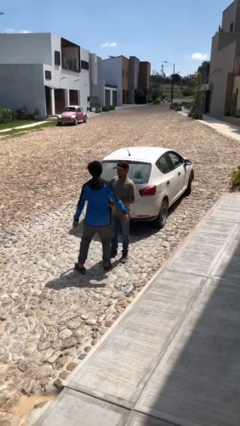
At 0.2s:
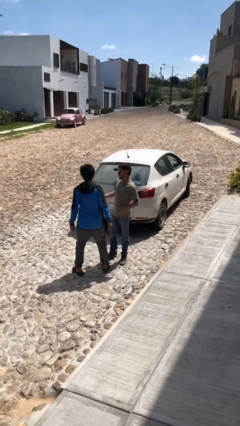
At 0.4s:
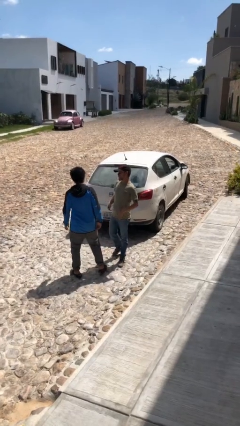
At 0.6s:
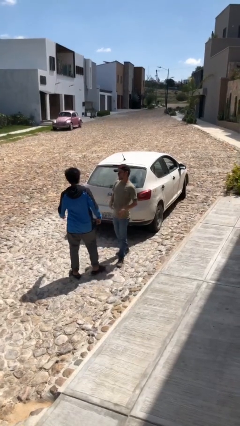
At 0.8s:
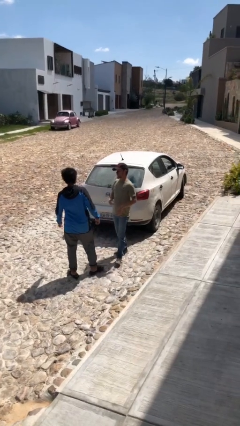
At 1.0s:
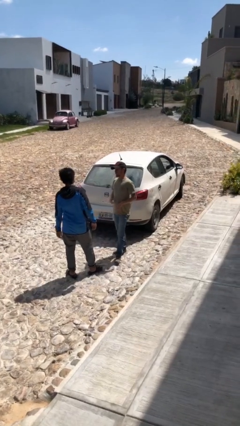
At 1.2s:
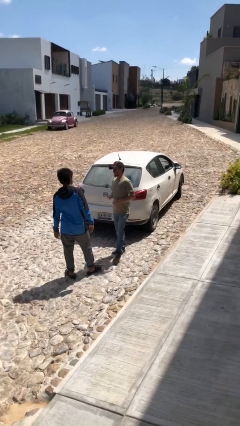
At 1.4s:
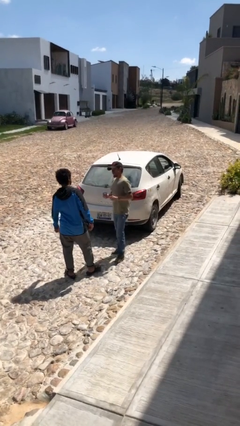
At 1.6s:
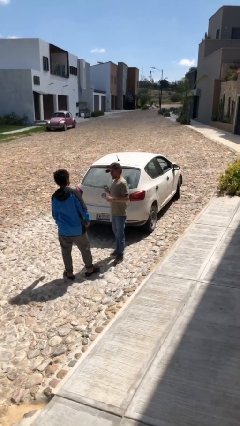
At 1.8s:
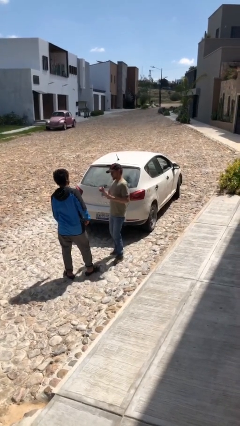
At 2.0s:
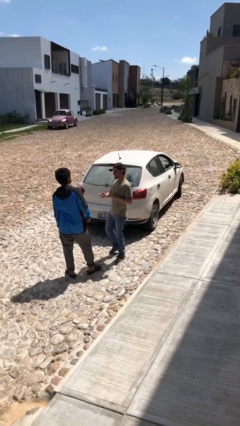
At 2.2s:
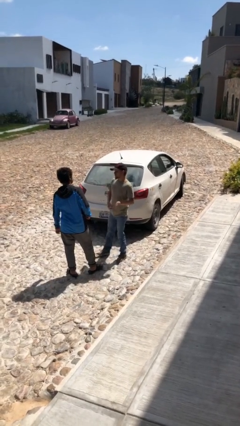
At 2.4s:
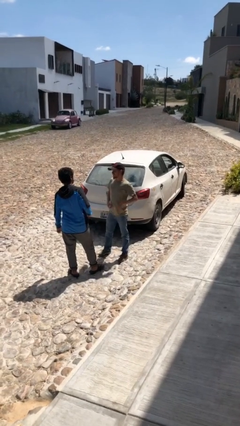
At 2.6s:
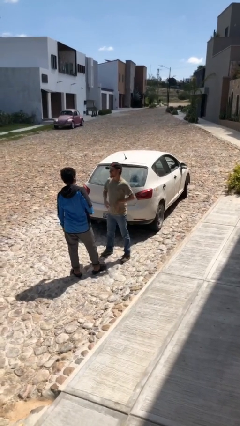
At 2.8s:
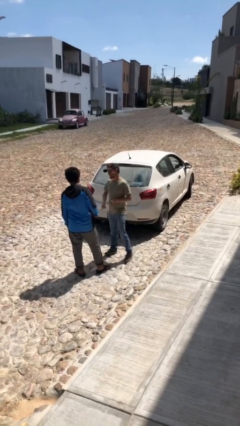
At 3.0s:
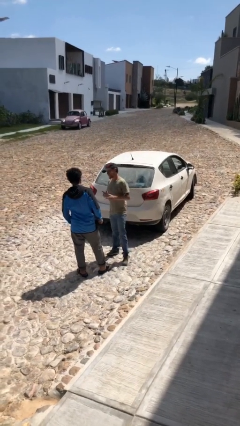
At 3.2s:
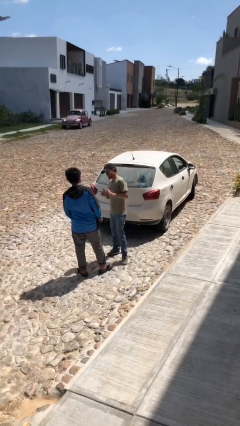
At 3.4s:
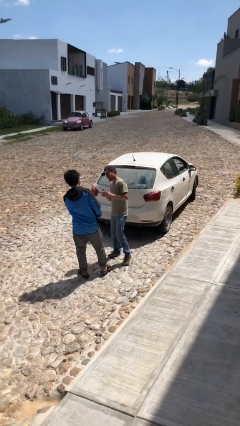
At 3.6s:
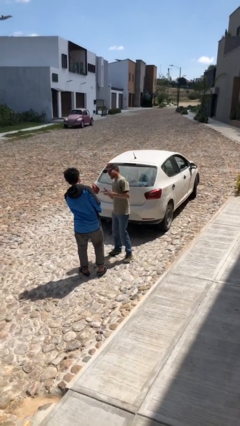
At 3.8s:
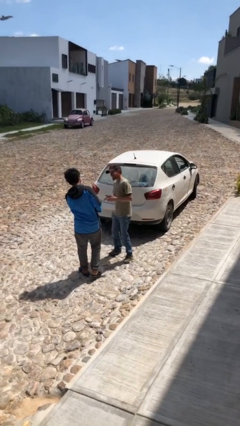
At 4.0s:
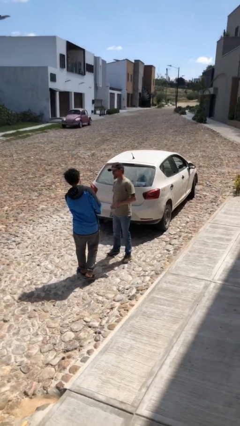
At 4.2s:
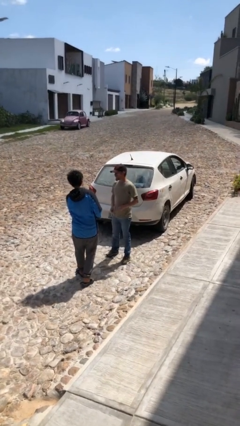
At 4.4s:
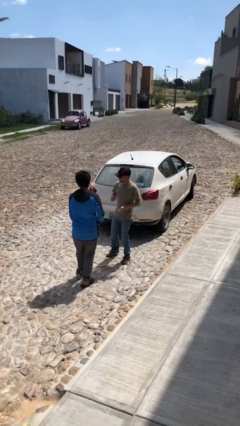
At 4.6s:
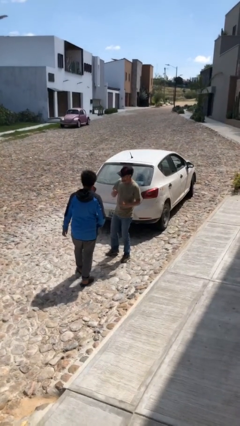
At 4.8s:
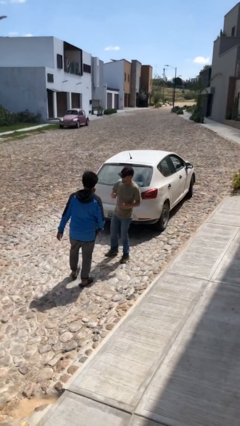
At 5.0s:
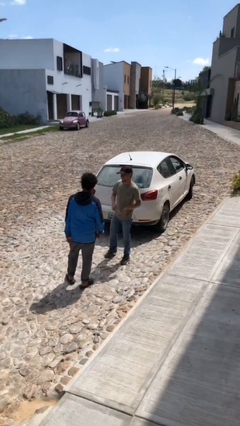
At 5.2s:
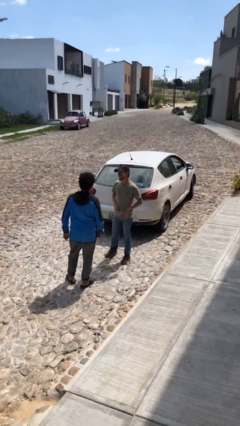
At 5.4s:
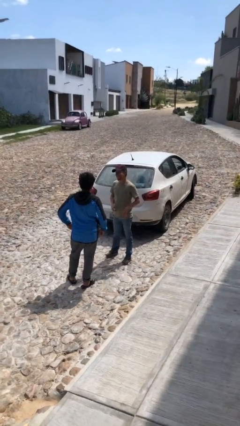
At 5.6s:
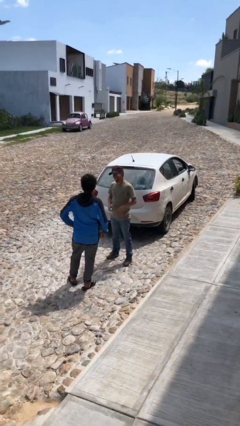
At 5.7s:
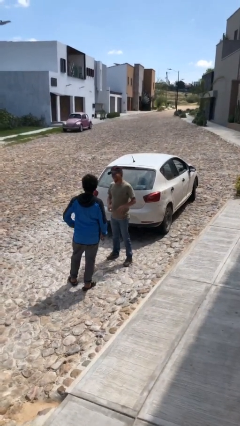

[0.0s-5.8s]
person talks to person

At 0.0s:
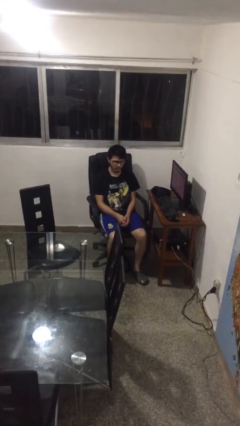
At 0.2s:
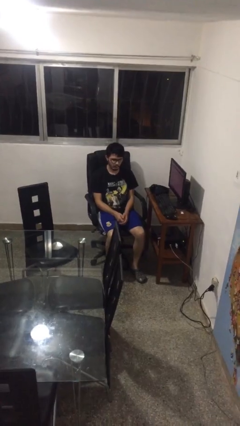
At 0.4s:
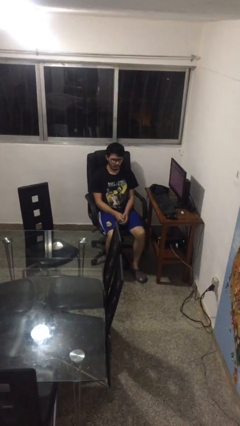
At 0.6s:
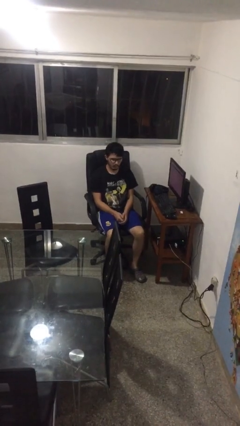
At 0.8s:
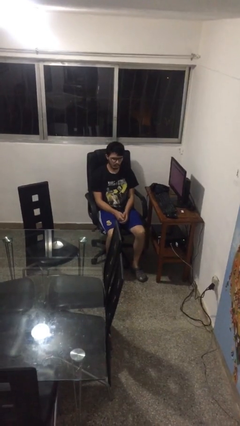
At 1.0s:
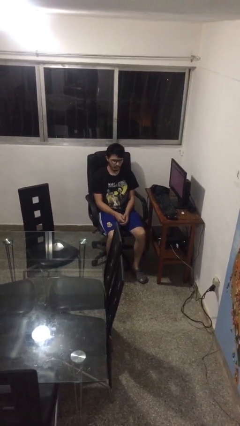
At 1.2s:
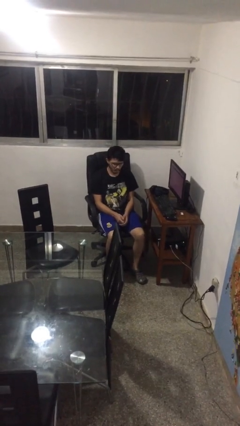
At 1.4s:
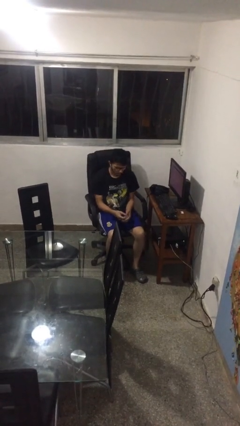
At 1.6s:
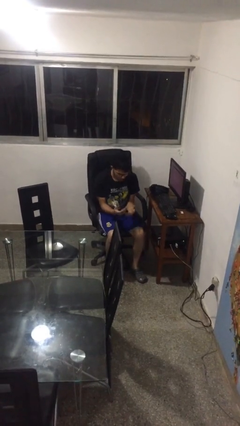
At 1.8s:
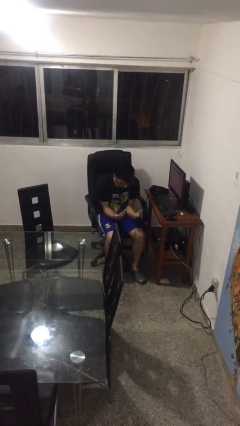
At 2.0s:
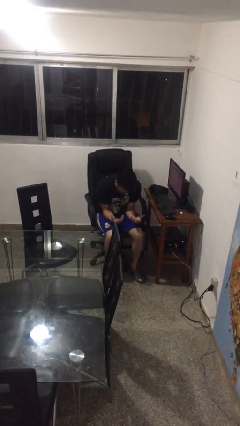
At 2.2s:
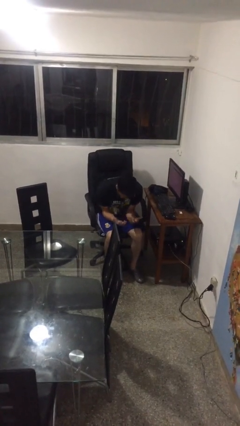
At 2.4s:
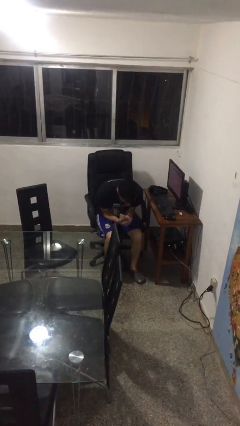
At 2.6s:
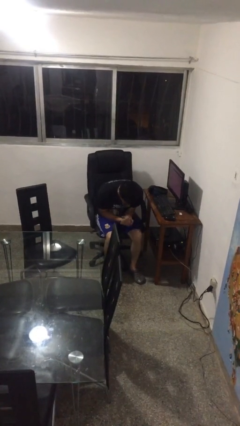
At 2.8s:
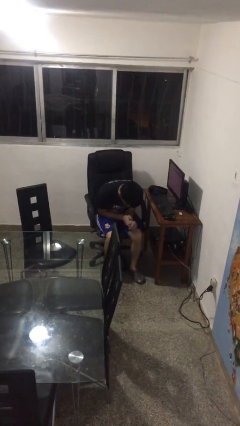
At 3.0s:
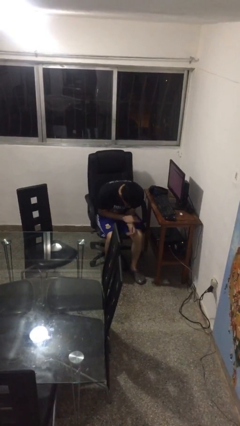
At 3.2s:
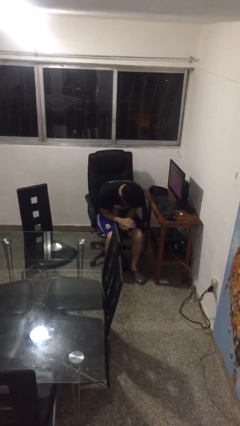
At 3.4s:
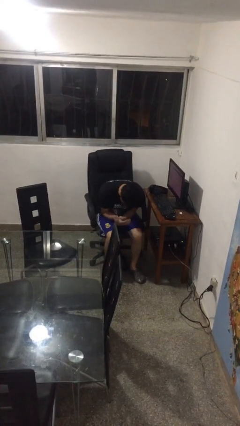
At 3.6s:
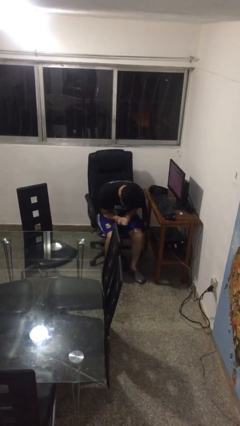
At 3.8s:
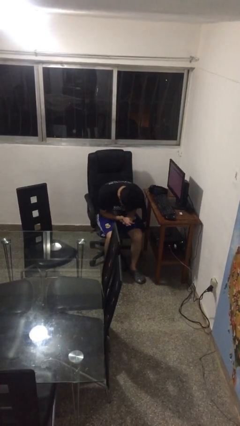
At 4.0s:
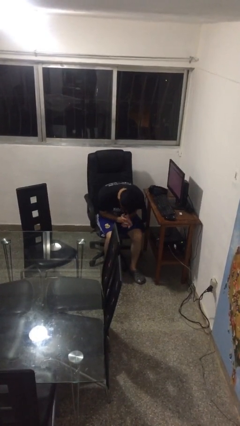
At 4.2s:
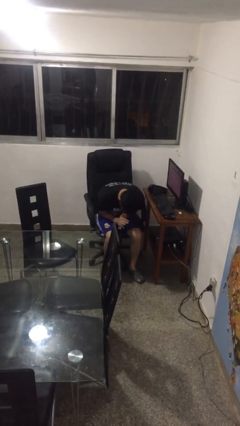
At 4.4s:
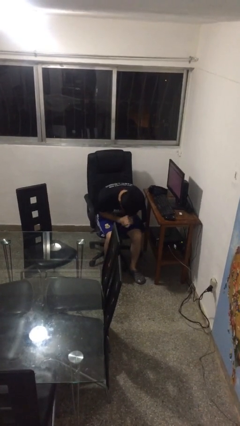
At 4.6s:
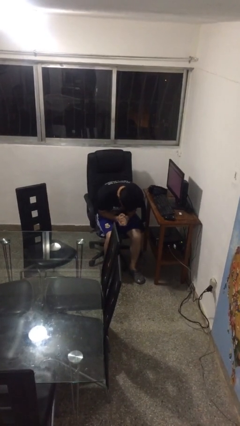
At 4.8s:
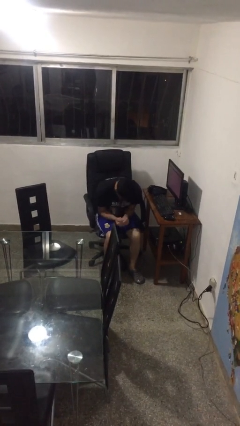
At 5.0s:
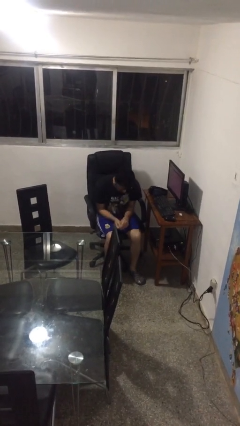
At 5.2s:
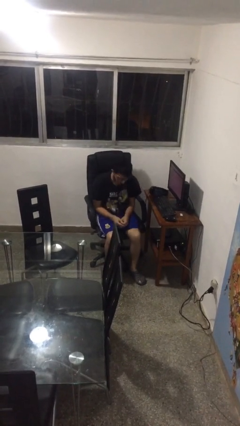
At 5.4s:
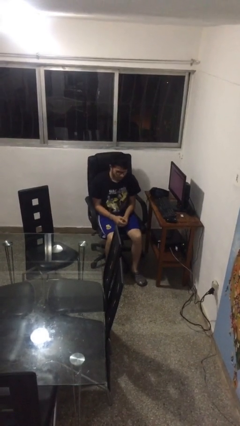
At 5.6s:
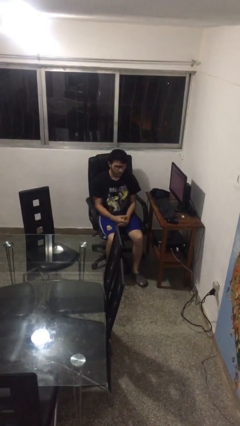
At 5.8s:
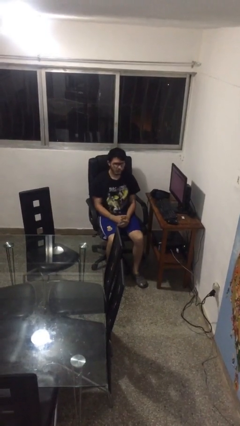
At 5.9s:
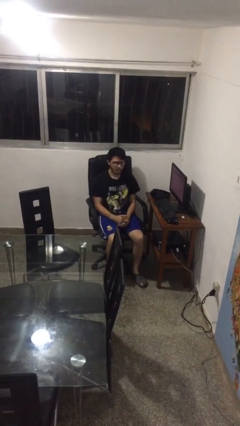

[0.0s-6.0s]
person looks at hands in lap

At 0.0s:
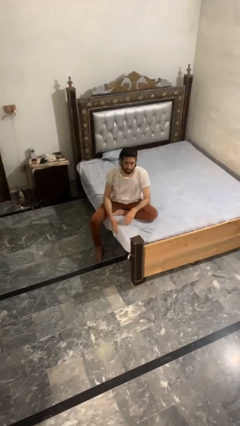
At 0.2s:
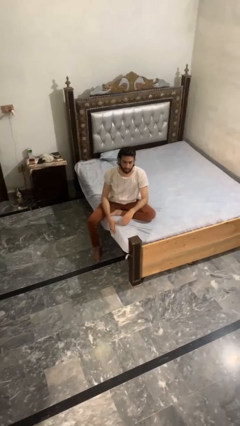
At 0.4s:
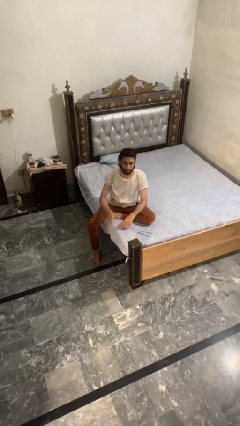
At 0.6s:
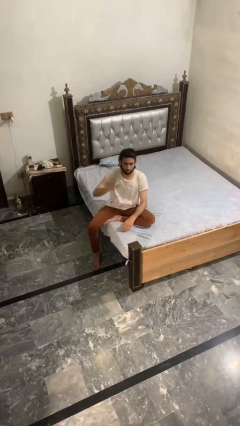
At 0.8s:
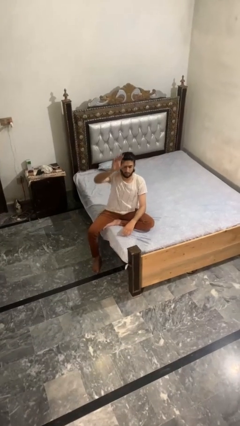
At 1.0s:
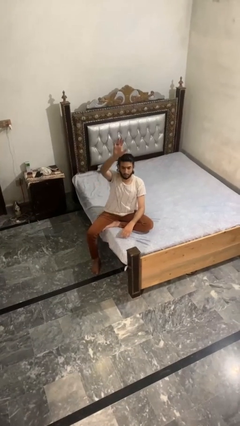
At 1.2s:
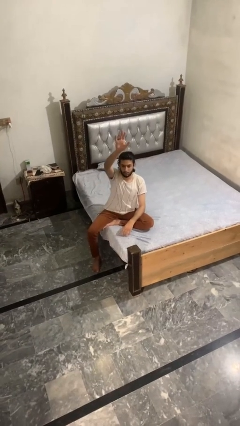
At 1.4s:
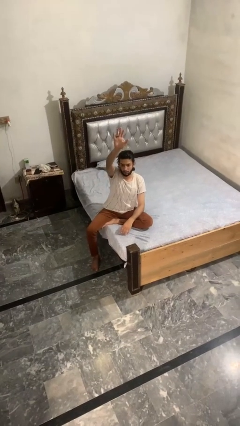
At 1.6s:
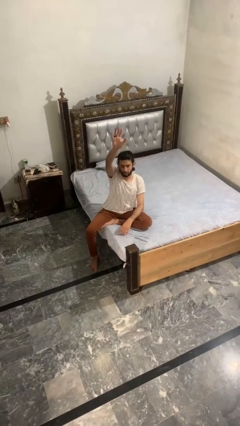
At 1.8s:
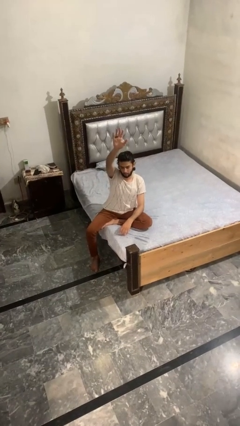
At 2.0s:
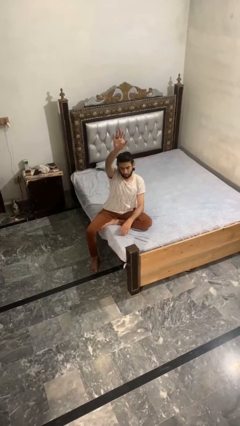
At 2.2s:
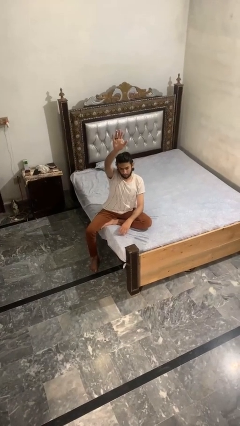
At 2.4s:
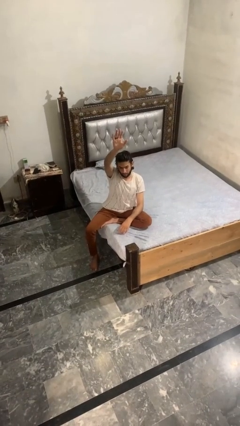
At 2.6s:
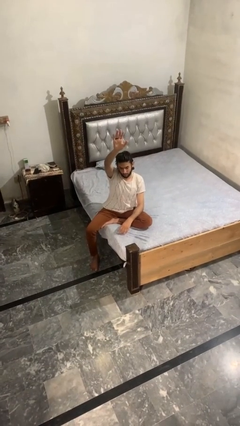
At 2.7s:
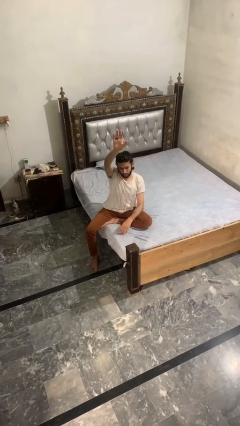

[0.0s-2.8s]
person gestures raise hand

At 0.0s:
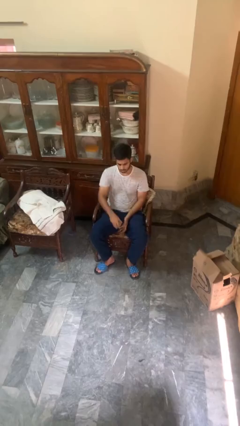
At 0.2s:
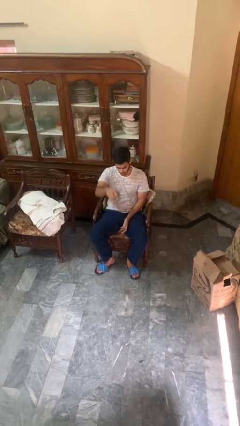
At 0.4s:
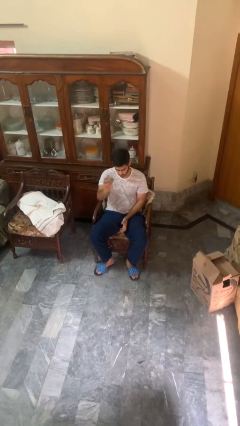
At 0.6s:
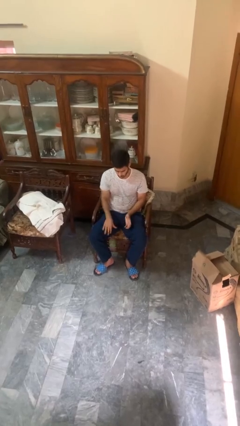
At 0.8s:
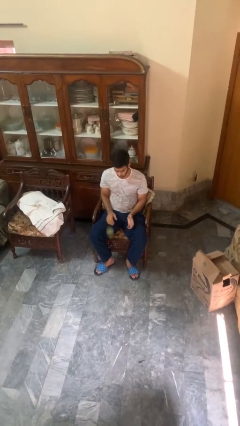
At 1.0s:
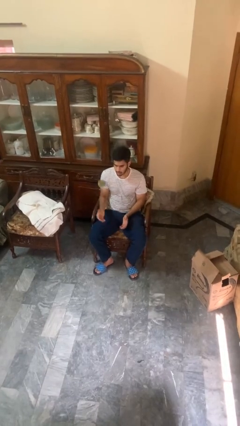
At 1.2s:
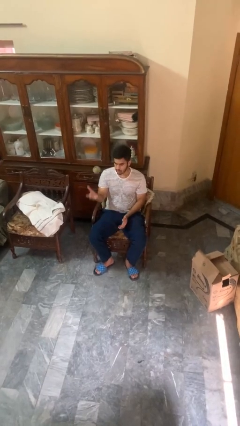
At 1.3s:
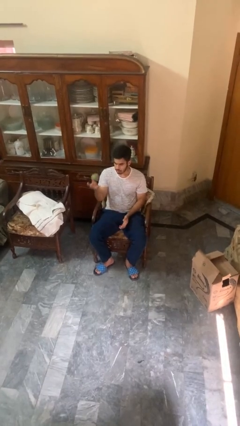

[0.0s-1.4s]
person bounces ball on floor

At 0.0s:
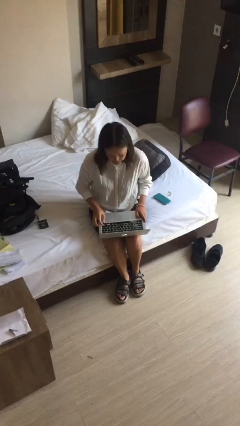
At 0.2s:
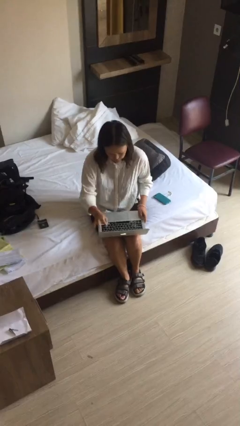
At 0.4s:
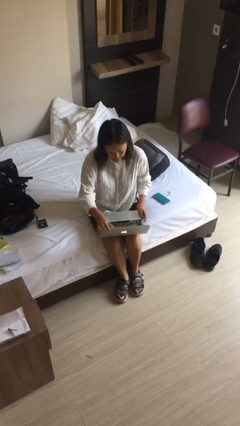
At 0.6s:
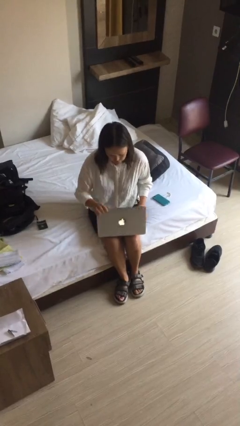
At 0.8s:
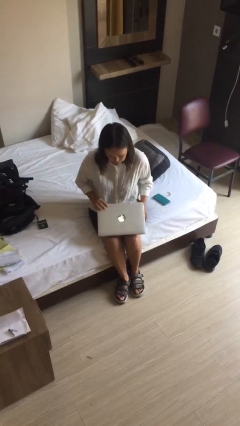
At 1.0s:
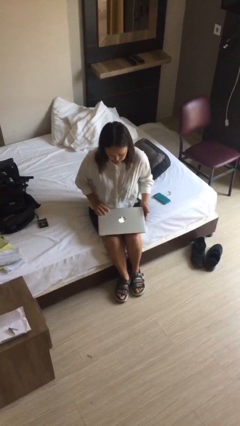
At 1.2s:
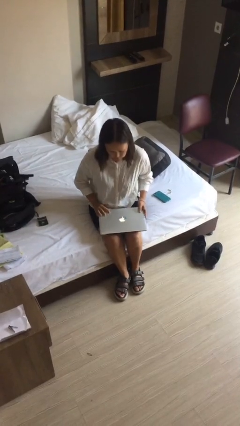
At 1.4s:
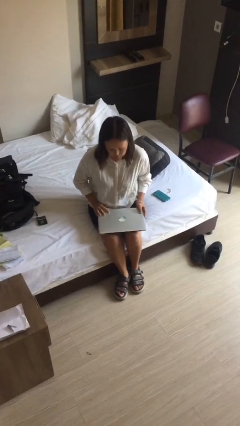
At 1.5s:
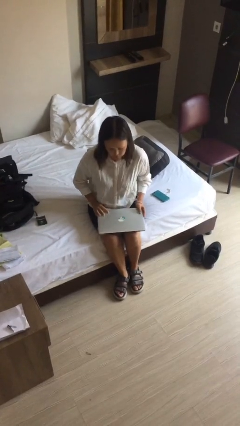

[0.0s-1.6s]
person closes laptop

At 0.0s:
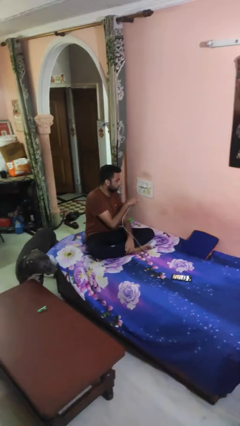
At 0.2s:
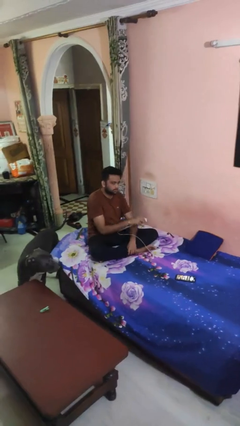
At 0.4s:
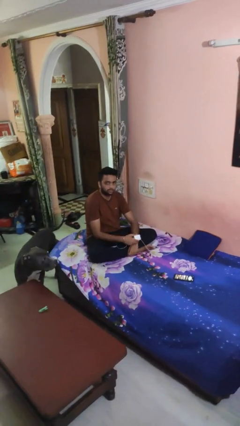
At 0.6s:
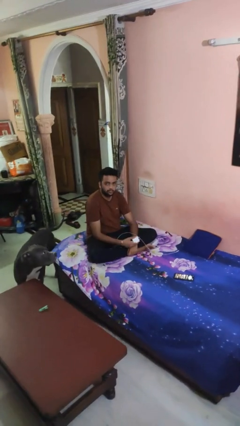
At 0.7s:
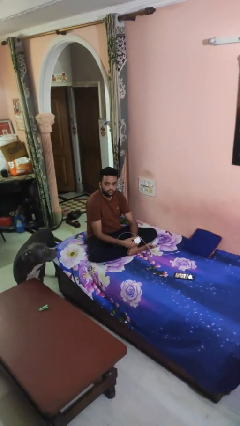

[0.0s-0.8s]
person unplugs from electrical socket
